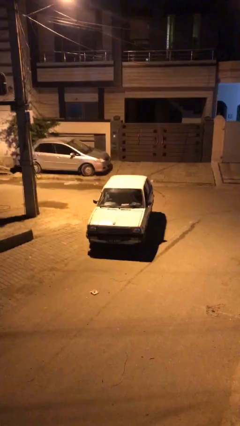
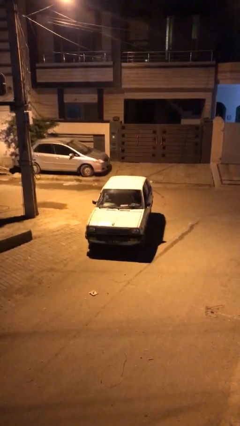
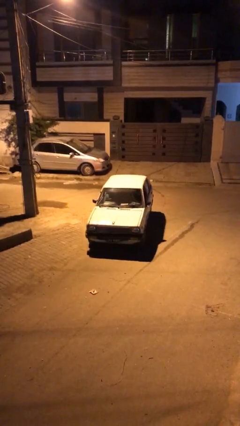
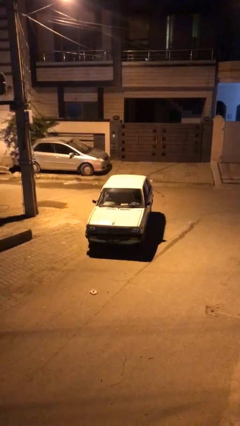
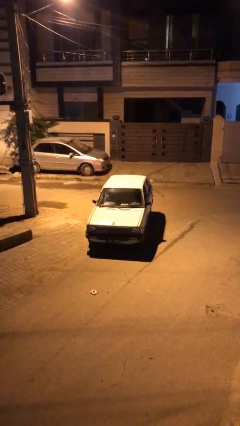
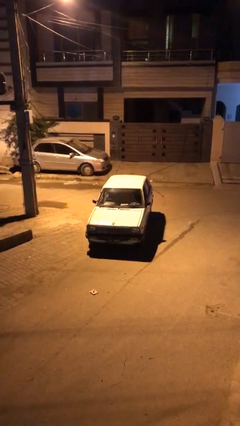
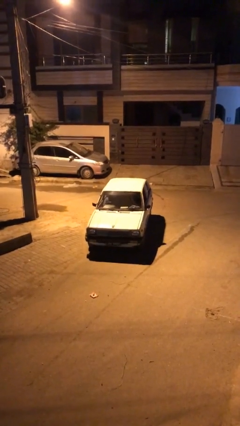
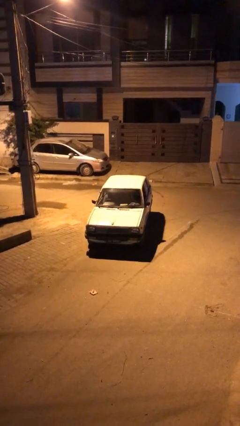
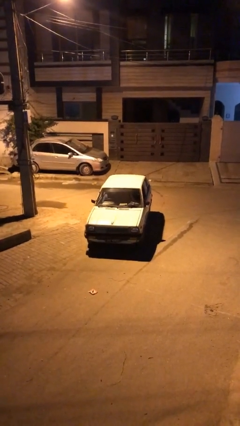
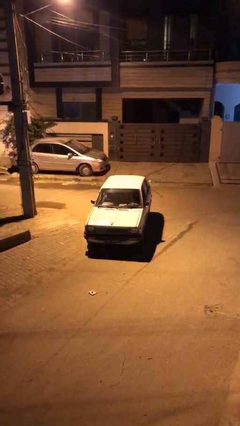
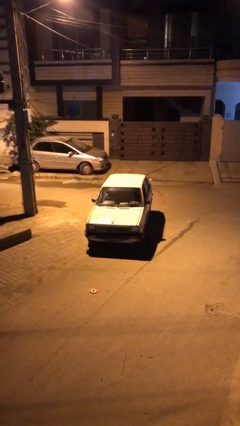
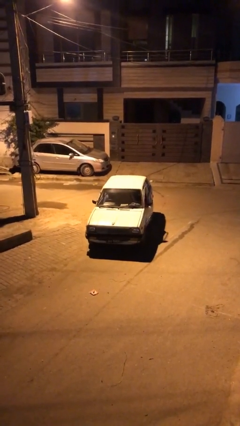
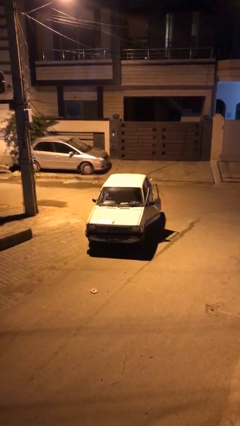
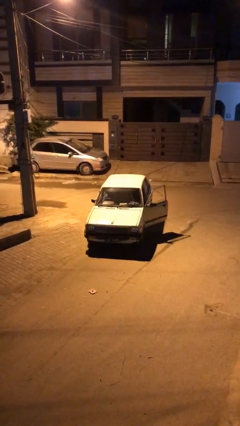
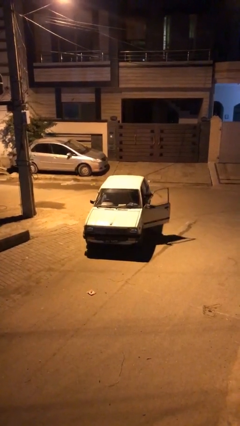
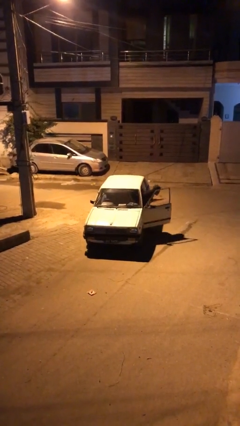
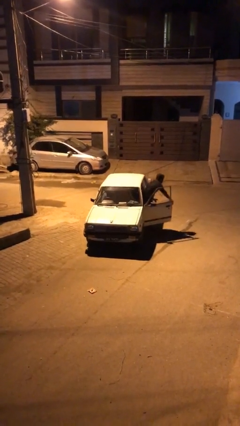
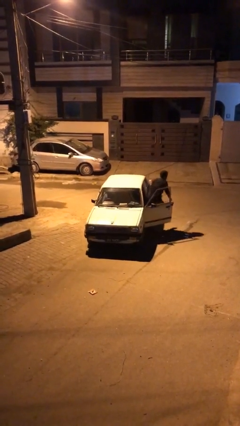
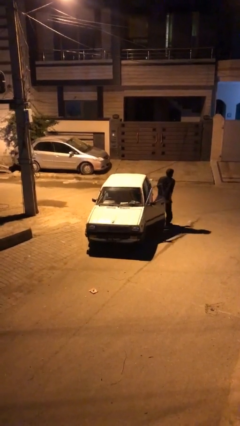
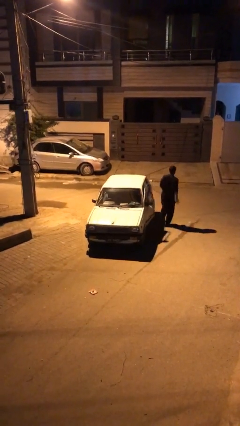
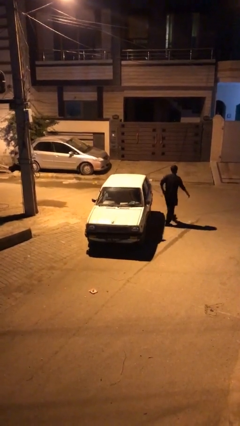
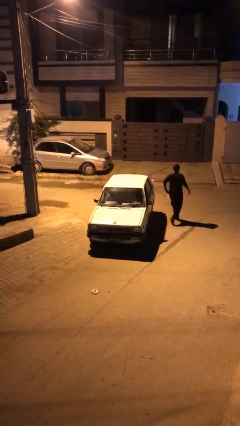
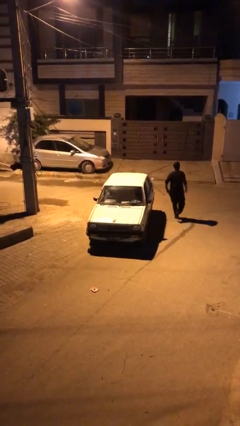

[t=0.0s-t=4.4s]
car drops off person

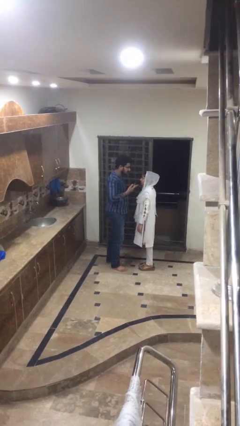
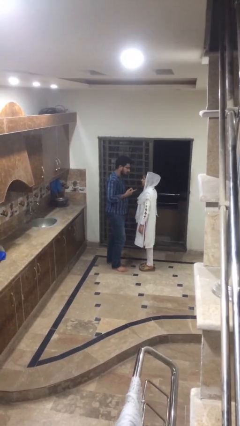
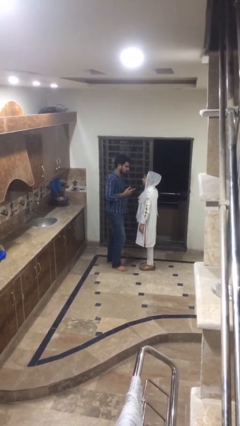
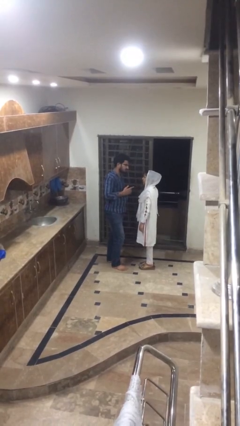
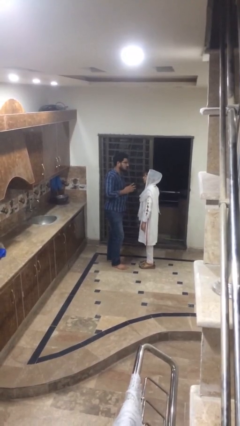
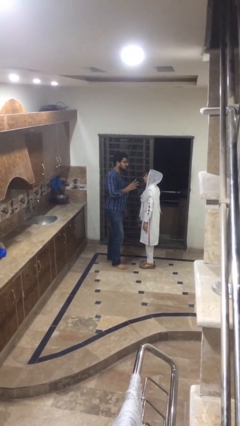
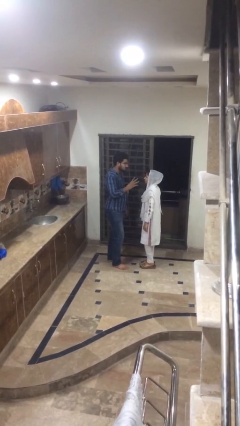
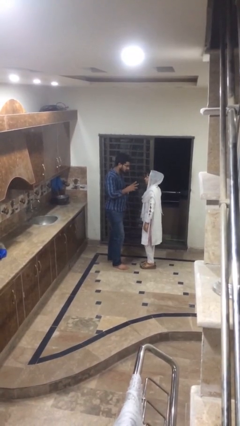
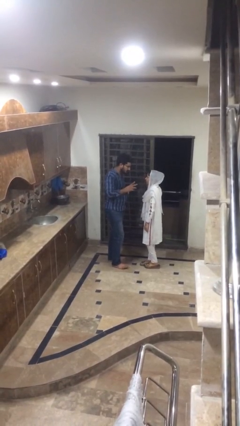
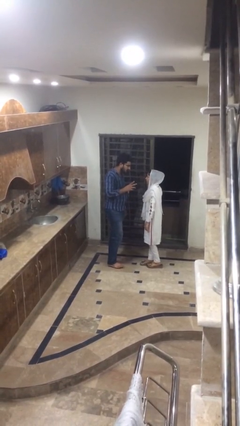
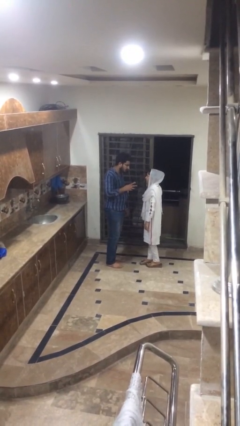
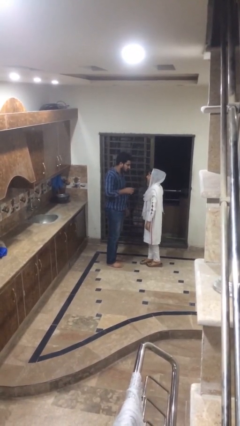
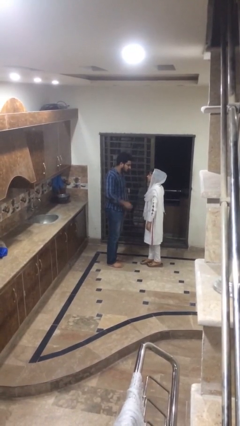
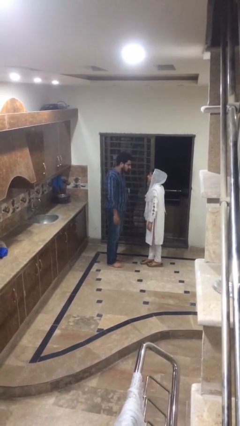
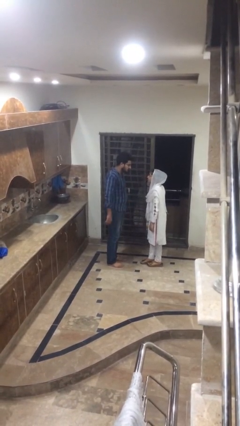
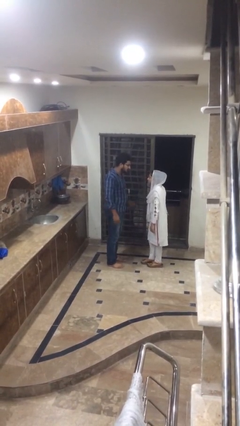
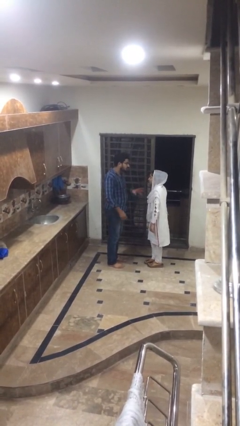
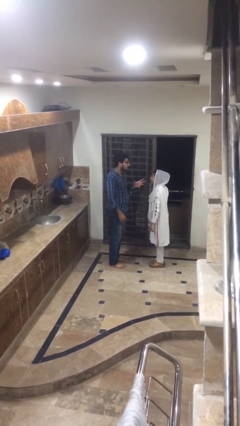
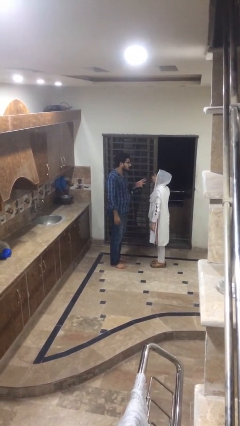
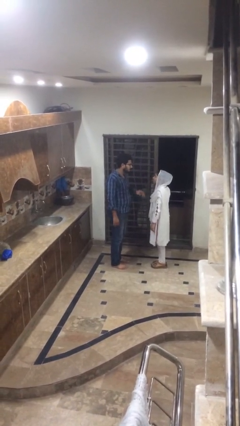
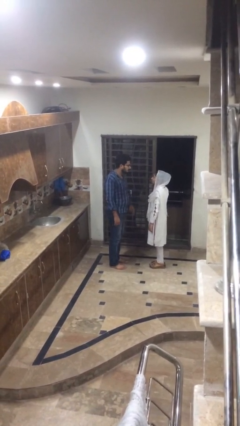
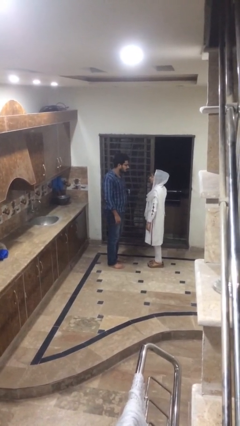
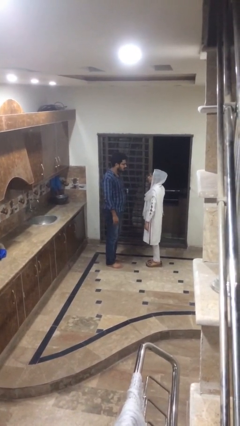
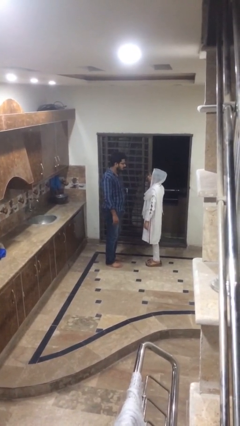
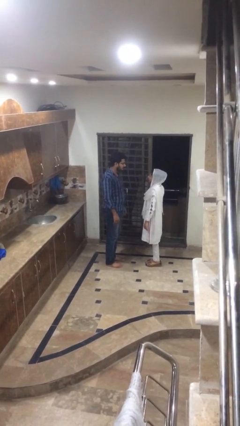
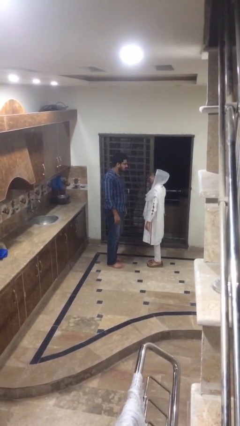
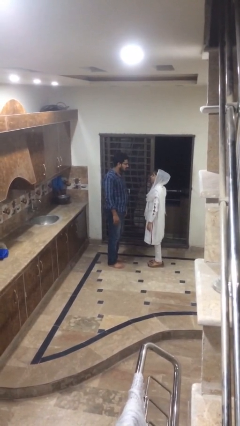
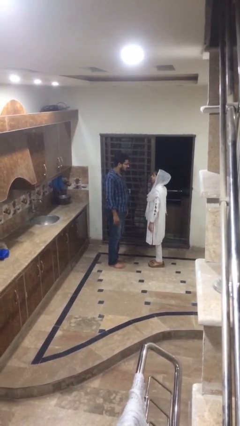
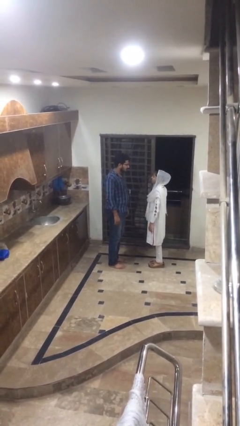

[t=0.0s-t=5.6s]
person talks to person

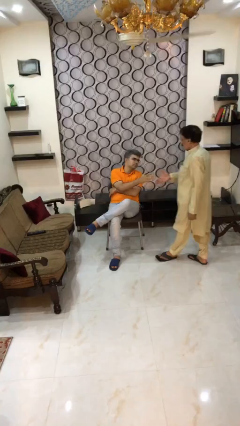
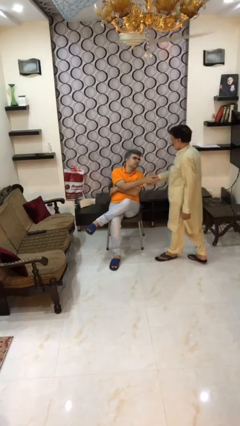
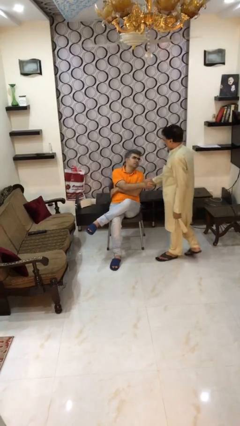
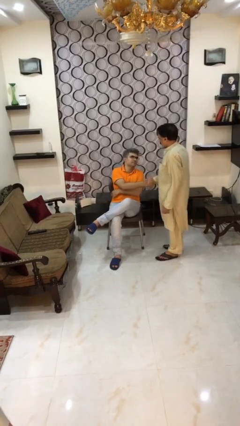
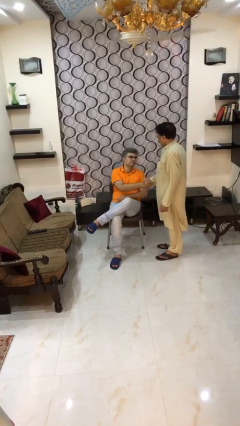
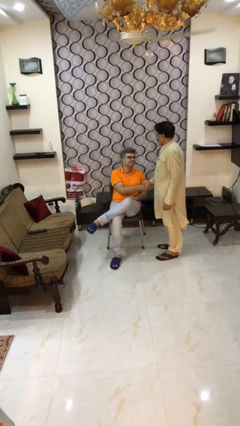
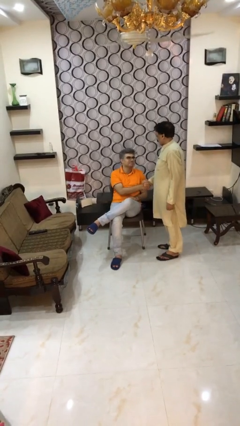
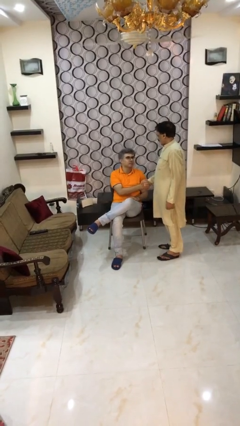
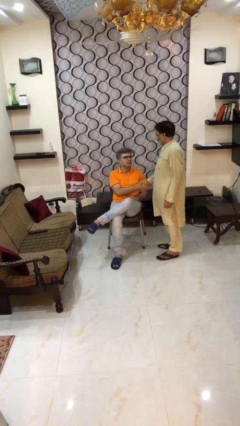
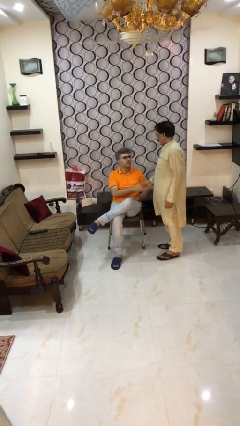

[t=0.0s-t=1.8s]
person shakes hand

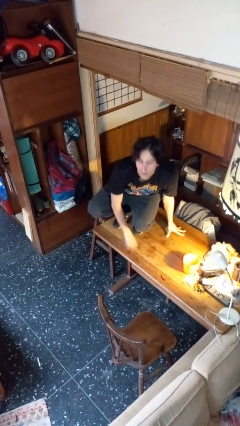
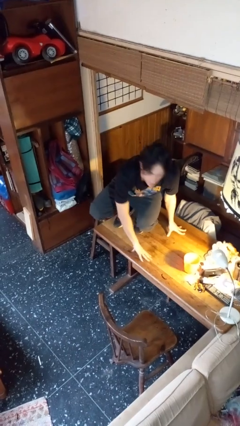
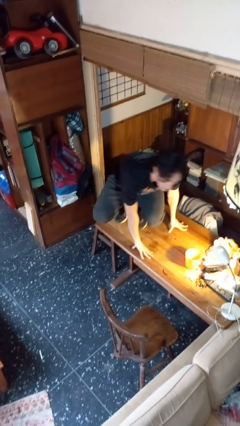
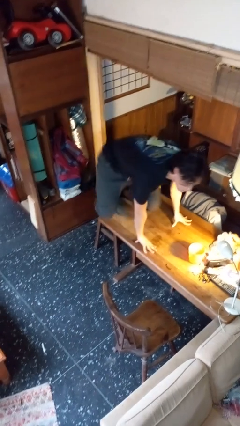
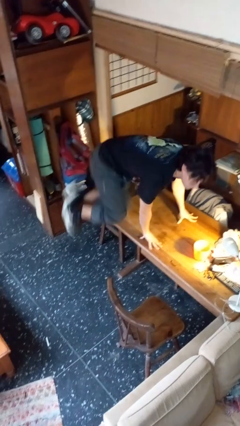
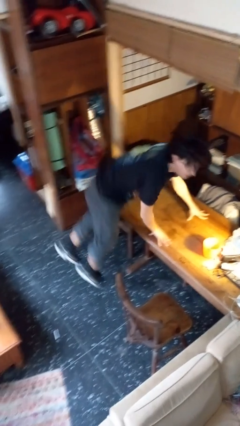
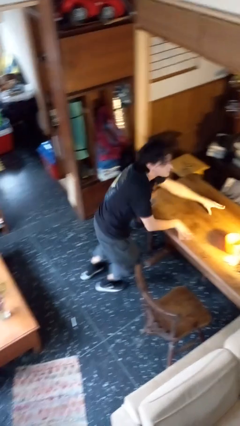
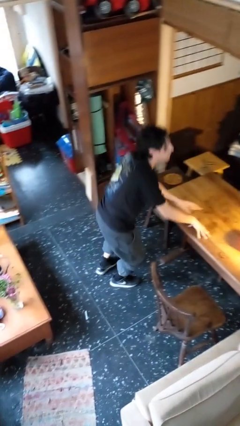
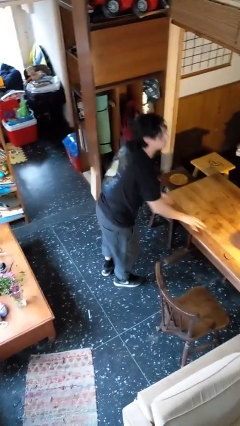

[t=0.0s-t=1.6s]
person climbs off table

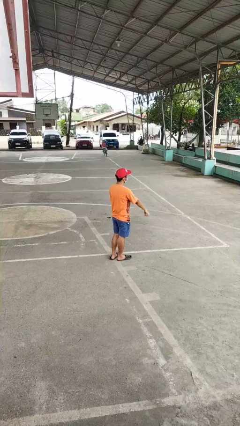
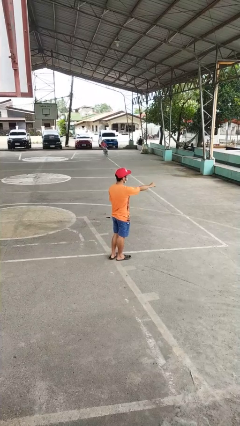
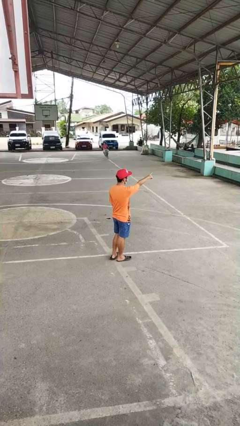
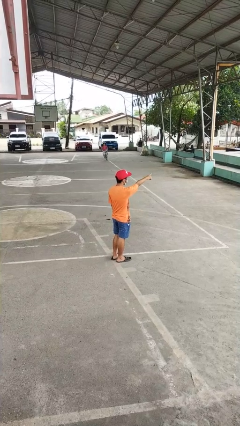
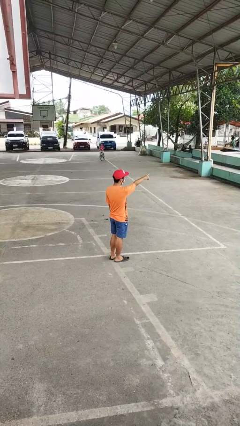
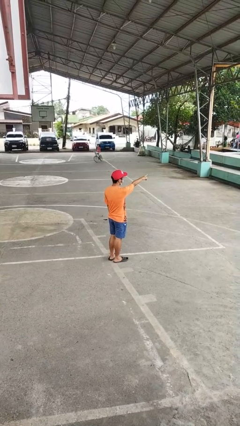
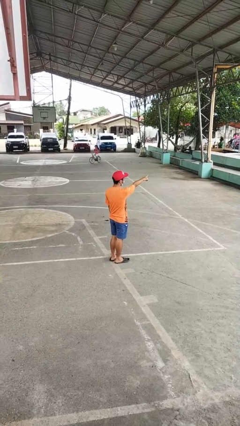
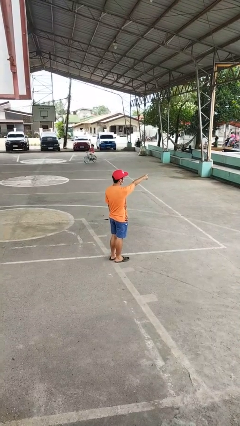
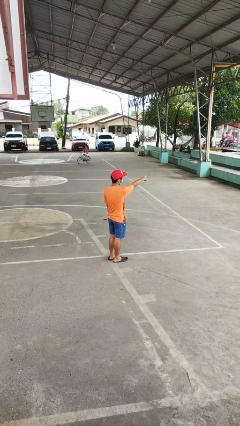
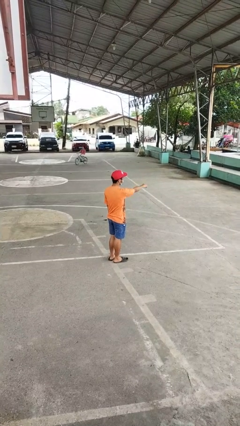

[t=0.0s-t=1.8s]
person points at person

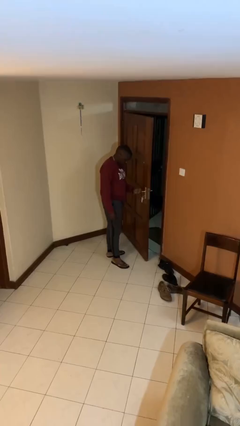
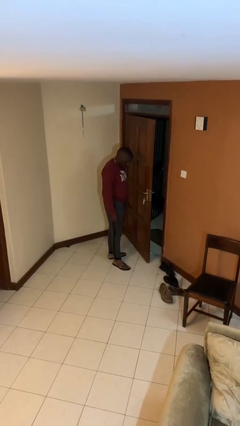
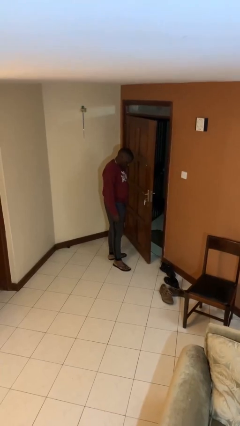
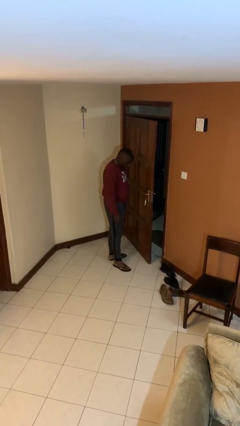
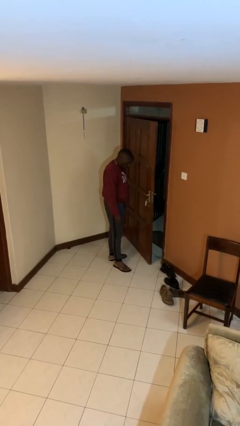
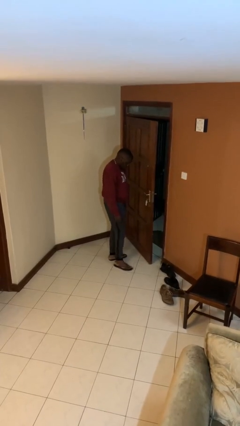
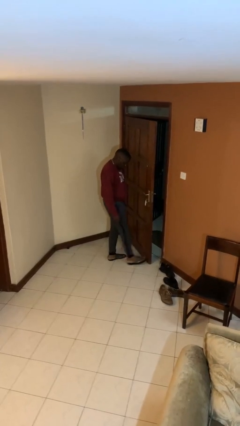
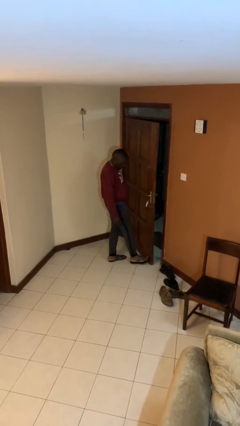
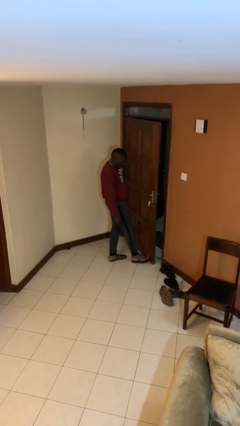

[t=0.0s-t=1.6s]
person opens facility door

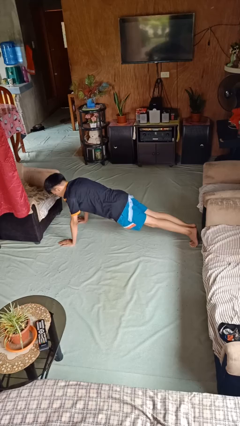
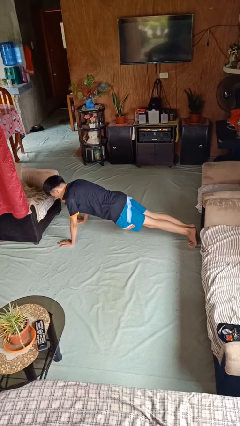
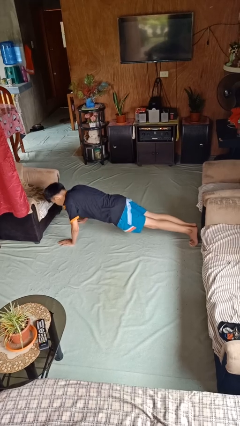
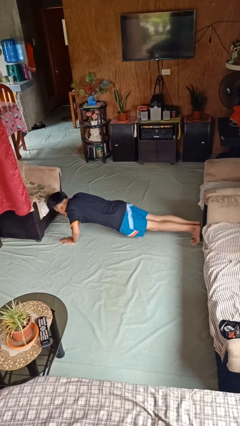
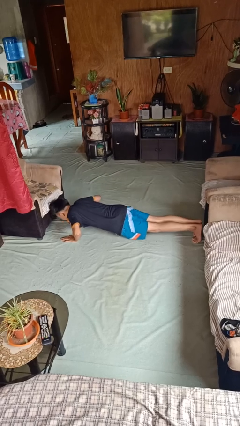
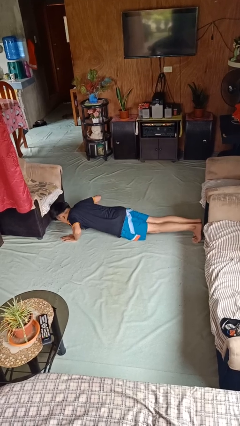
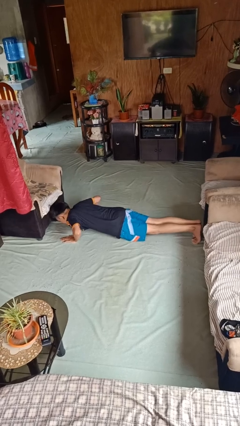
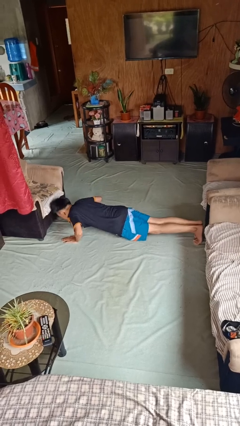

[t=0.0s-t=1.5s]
person exercises with pushup
